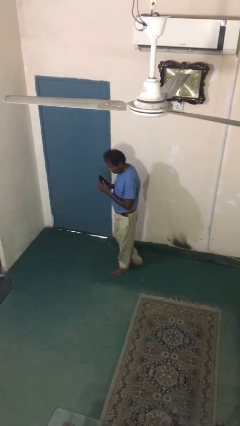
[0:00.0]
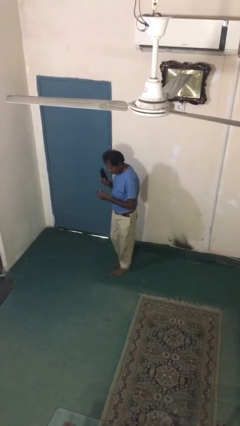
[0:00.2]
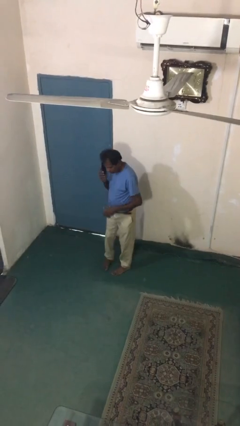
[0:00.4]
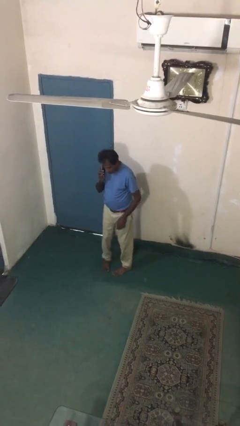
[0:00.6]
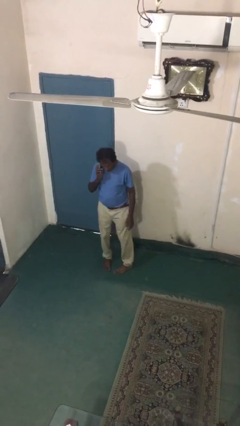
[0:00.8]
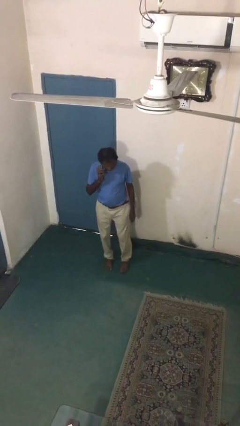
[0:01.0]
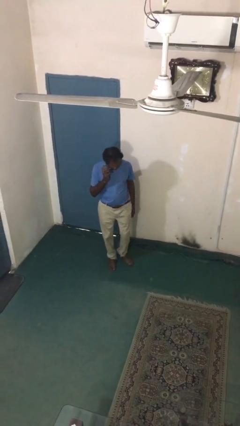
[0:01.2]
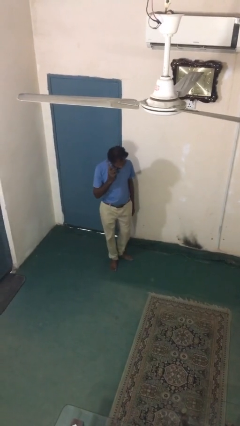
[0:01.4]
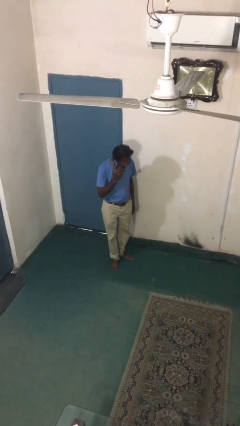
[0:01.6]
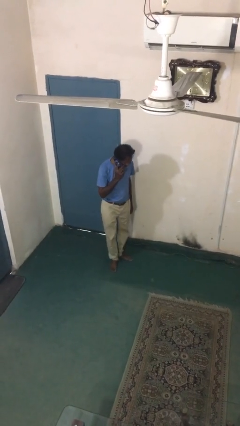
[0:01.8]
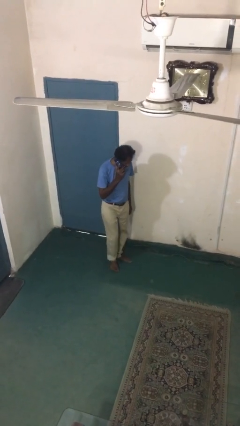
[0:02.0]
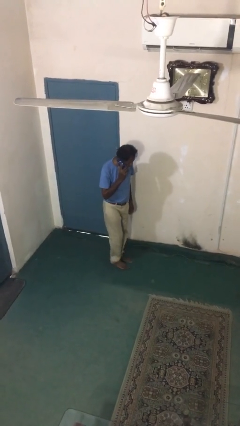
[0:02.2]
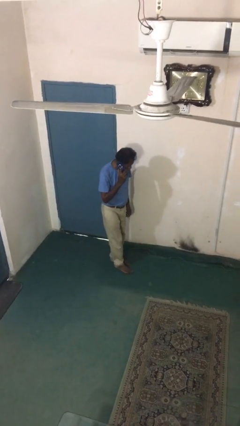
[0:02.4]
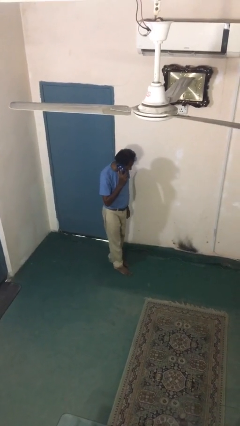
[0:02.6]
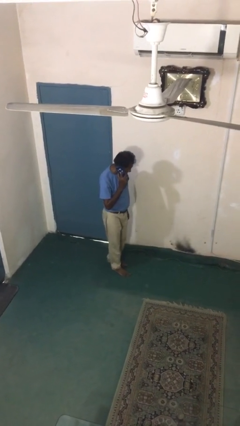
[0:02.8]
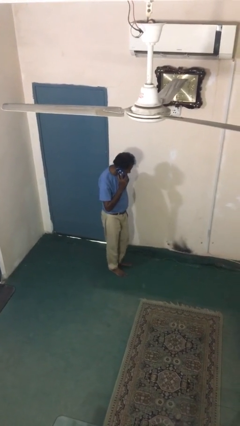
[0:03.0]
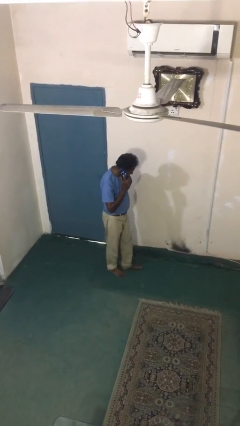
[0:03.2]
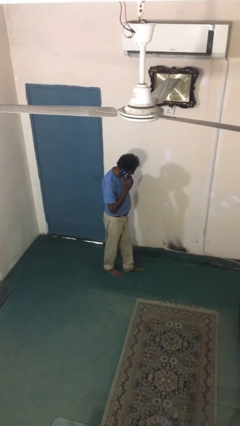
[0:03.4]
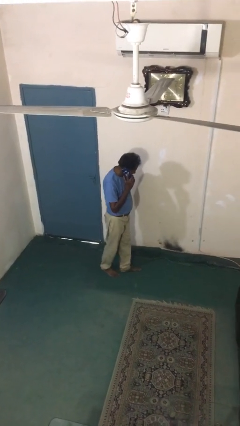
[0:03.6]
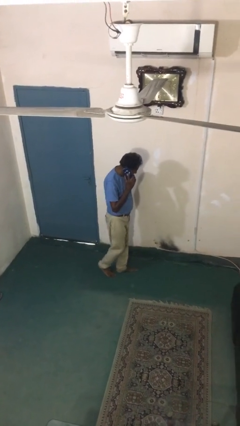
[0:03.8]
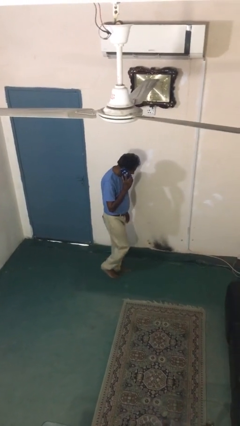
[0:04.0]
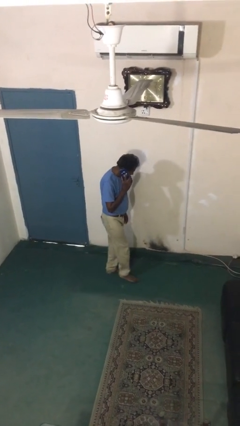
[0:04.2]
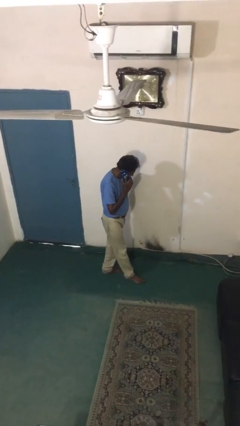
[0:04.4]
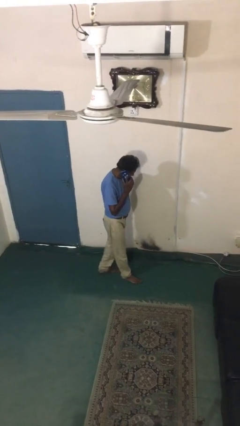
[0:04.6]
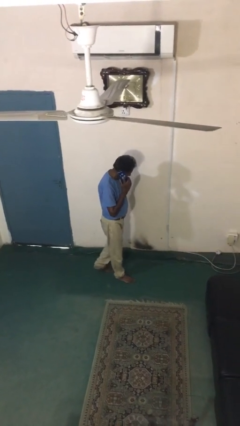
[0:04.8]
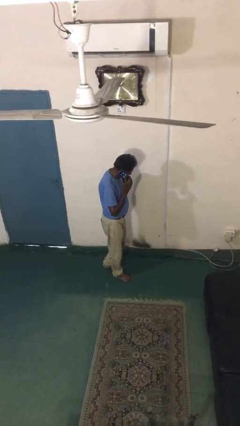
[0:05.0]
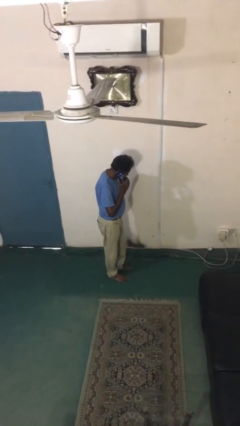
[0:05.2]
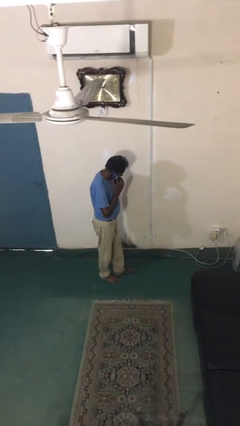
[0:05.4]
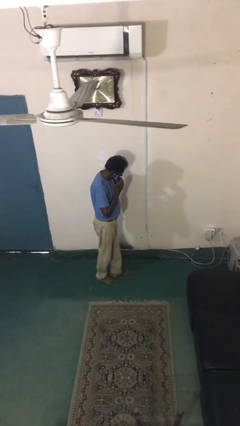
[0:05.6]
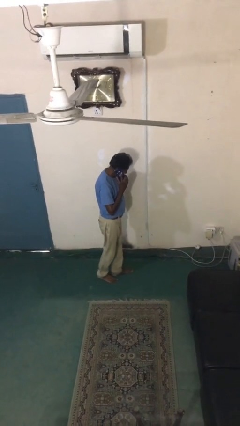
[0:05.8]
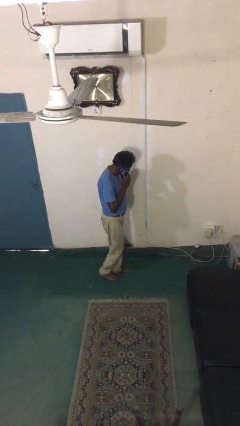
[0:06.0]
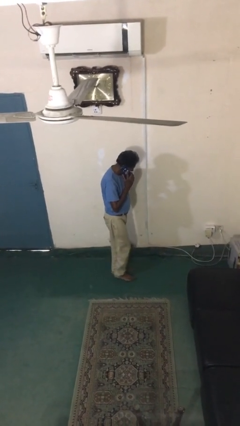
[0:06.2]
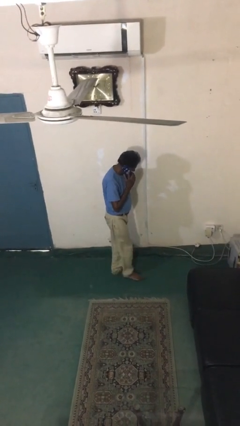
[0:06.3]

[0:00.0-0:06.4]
person talks on phone

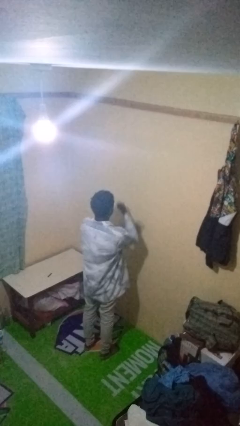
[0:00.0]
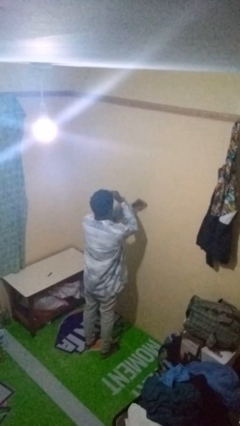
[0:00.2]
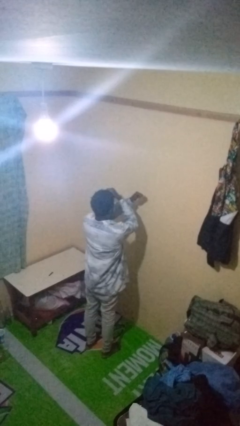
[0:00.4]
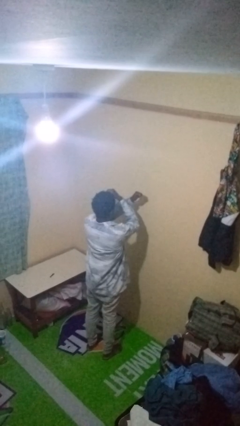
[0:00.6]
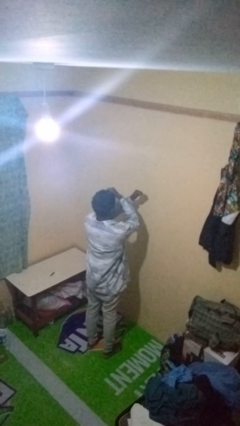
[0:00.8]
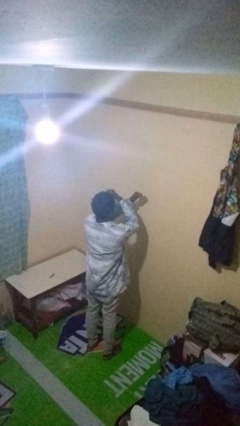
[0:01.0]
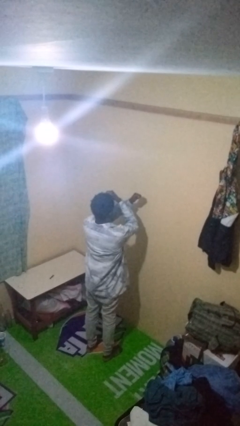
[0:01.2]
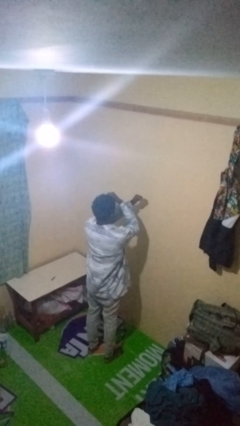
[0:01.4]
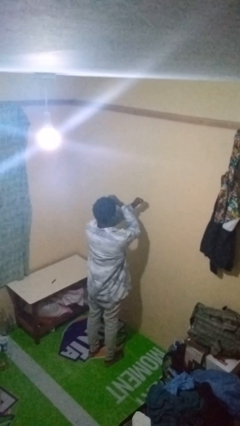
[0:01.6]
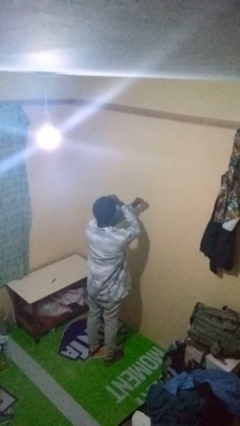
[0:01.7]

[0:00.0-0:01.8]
person gestures arms x

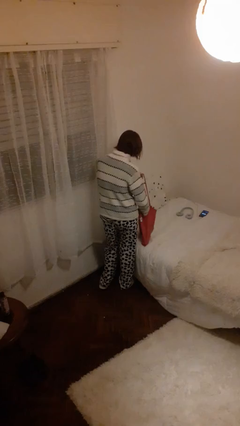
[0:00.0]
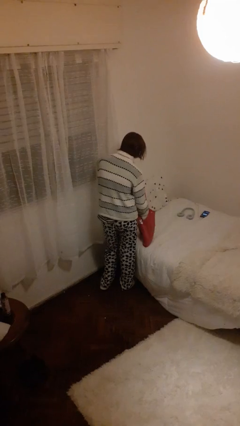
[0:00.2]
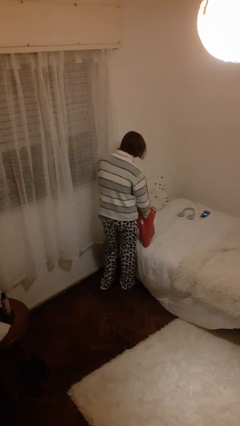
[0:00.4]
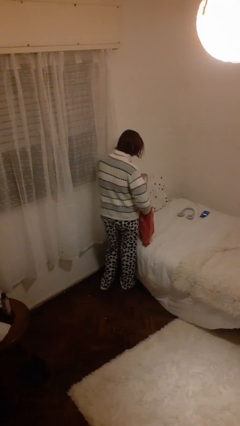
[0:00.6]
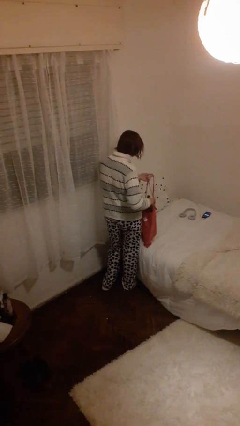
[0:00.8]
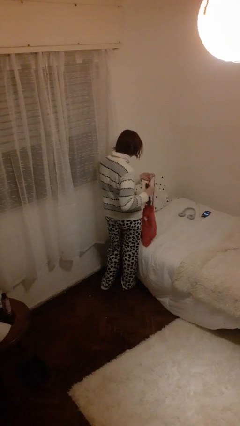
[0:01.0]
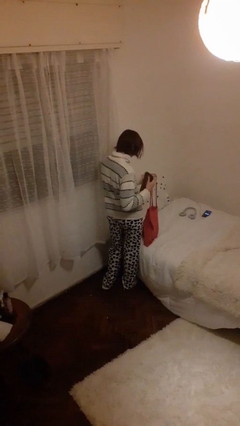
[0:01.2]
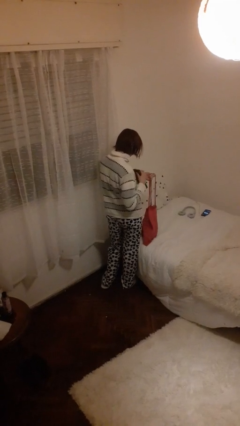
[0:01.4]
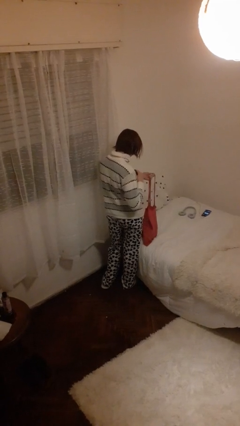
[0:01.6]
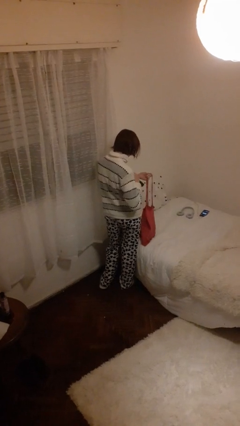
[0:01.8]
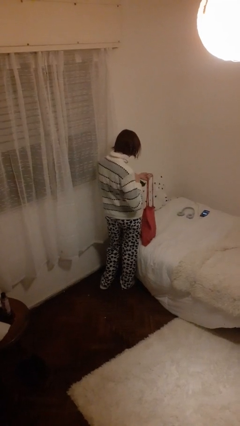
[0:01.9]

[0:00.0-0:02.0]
person takes object from bag

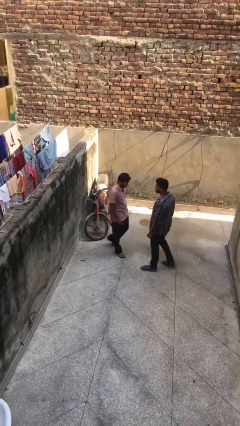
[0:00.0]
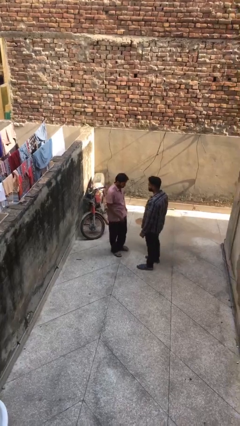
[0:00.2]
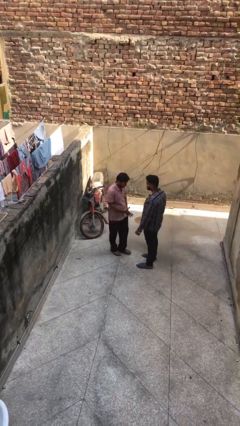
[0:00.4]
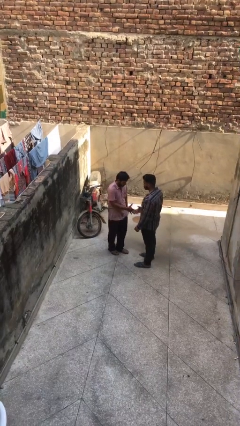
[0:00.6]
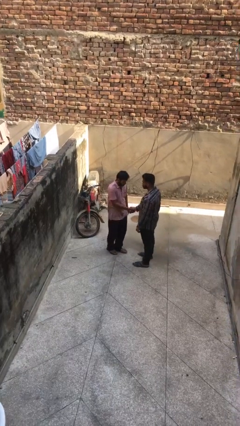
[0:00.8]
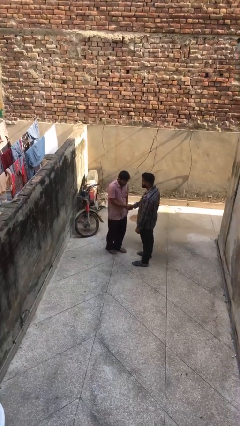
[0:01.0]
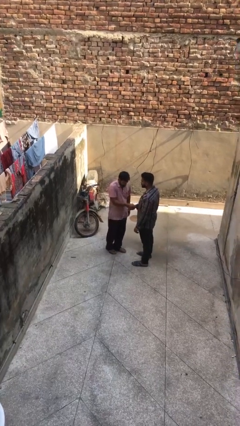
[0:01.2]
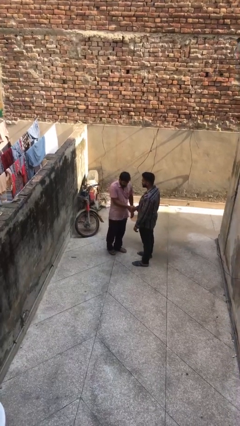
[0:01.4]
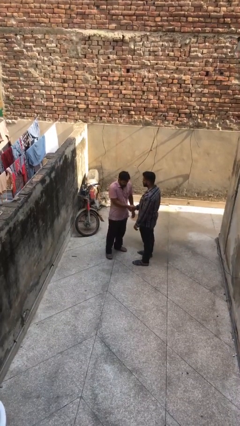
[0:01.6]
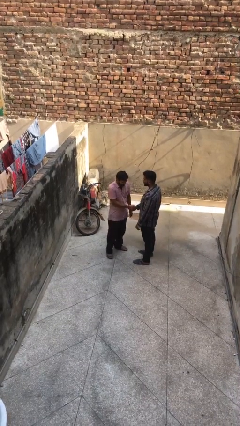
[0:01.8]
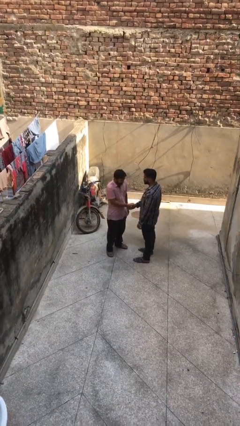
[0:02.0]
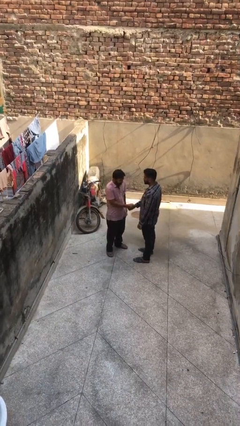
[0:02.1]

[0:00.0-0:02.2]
person shakes hand

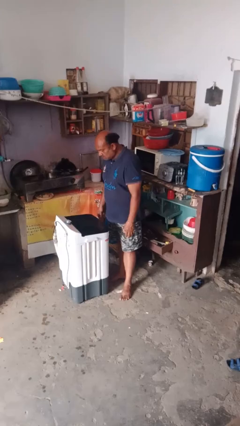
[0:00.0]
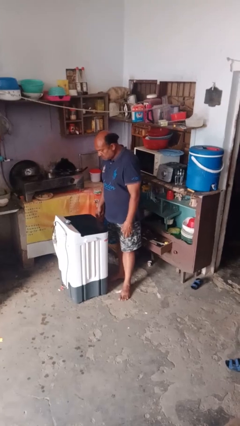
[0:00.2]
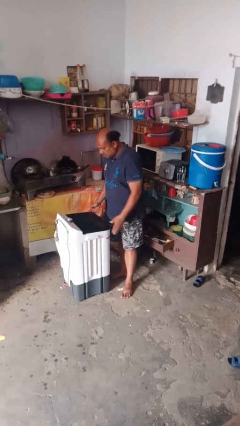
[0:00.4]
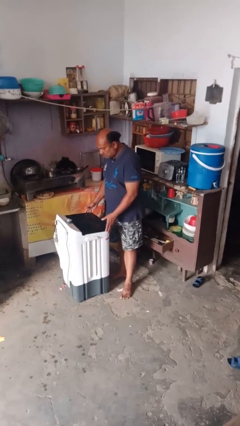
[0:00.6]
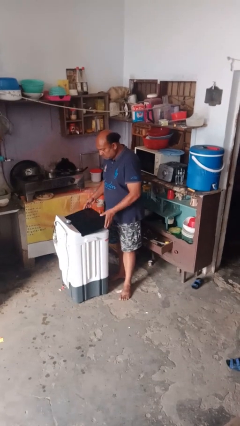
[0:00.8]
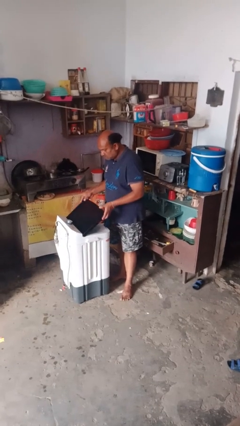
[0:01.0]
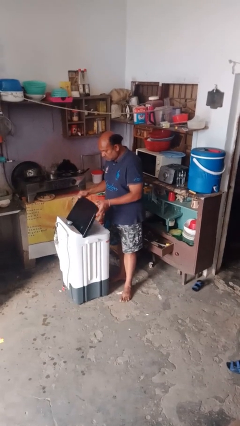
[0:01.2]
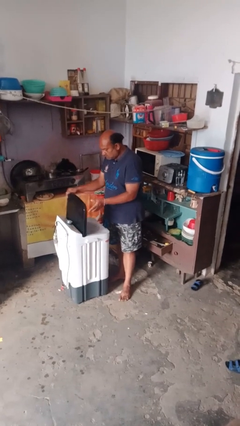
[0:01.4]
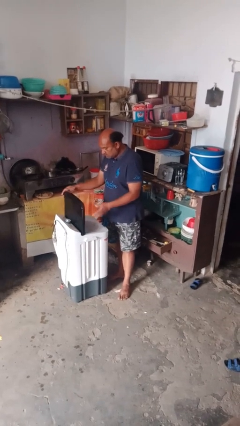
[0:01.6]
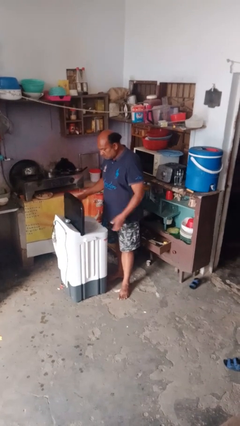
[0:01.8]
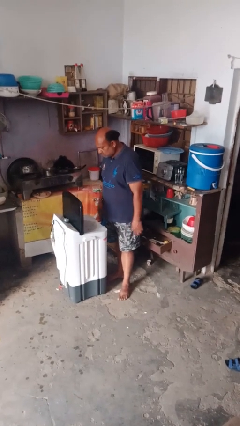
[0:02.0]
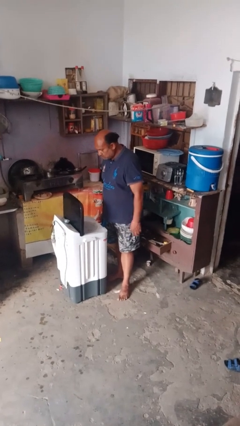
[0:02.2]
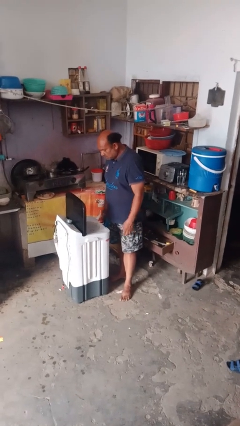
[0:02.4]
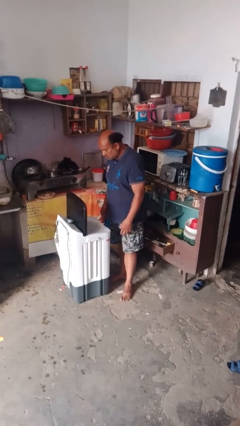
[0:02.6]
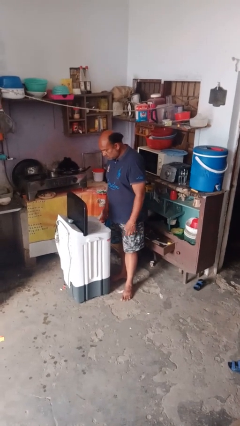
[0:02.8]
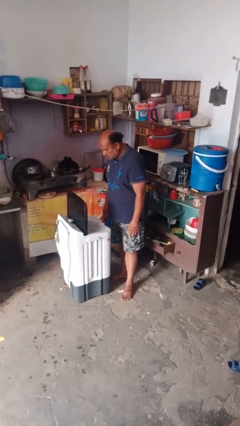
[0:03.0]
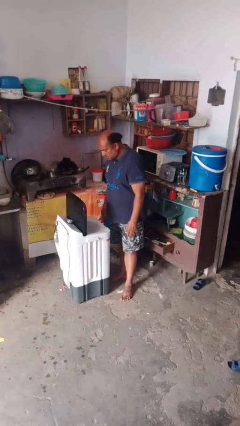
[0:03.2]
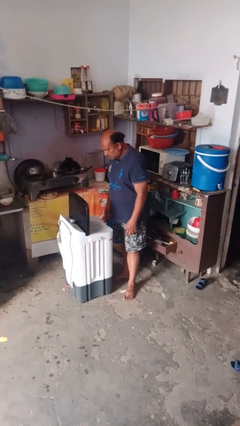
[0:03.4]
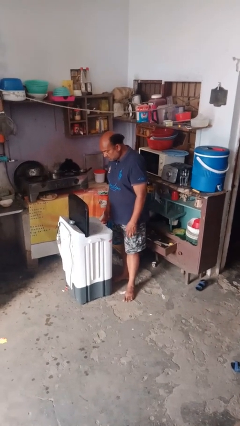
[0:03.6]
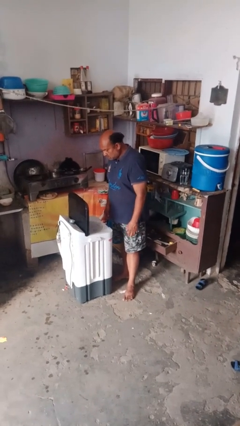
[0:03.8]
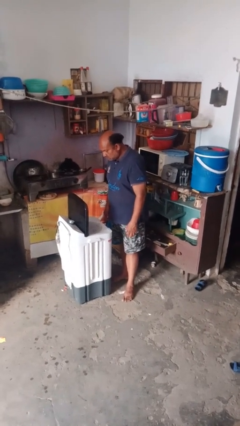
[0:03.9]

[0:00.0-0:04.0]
person opens clothes washer

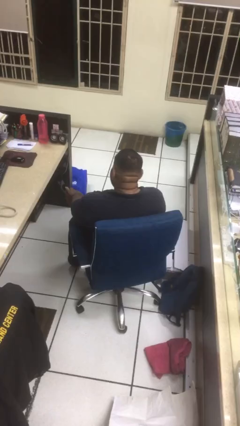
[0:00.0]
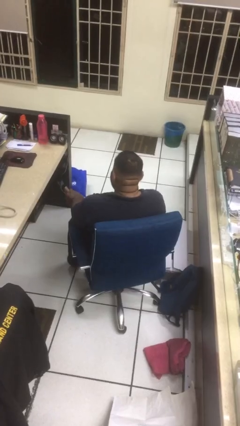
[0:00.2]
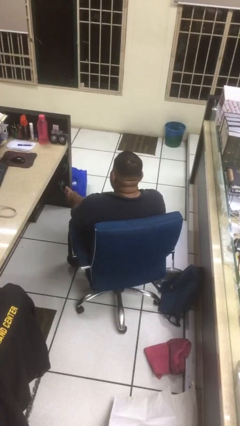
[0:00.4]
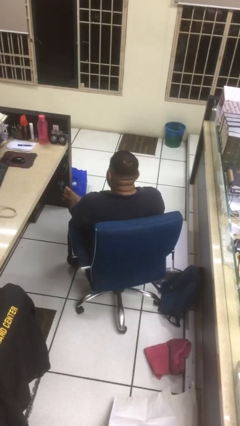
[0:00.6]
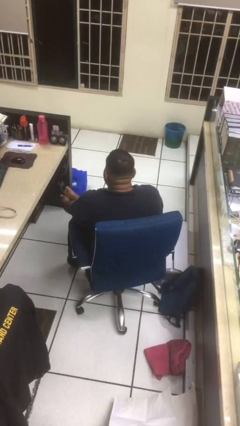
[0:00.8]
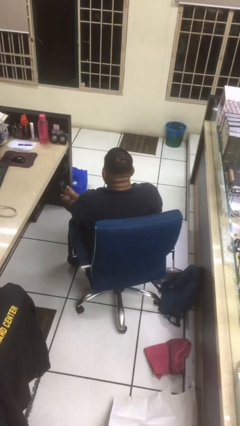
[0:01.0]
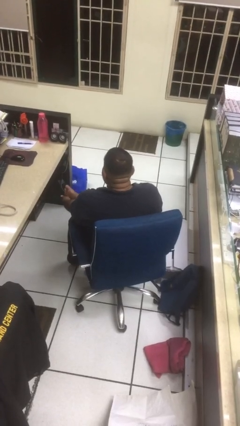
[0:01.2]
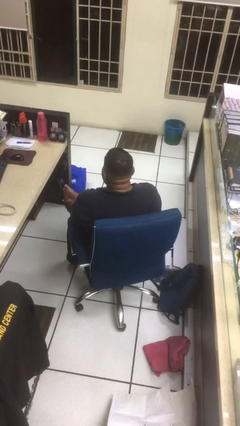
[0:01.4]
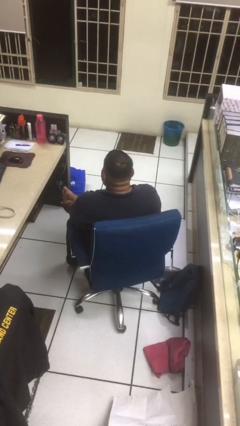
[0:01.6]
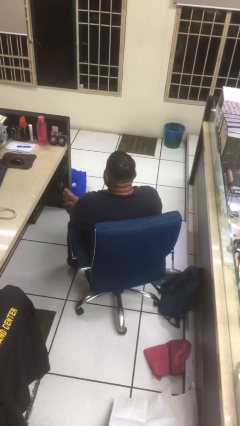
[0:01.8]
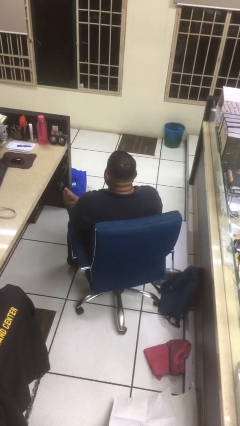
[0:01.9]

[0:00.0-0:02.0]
person rubs foot
